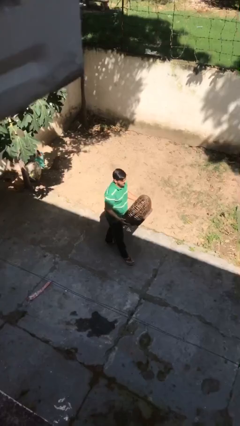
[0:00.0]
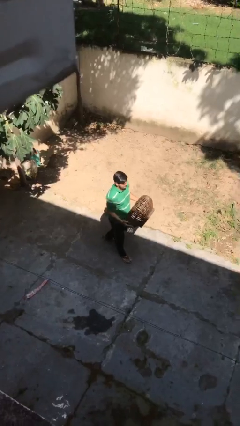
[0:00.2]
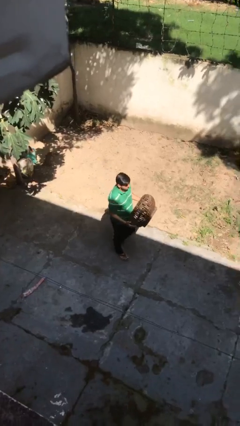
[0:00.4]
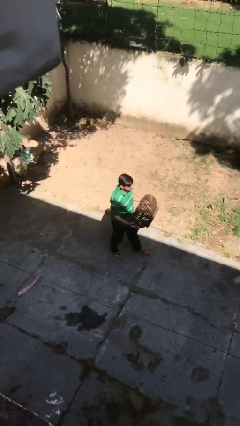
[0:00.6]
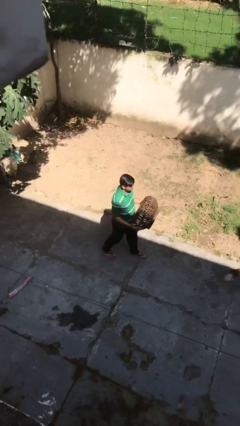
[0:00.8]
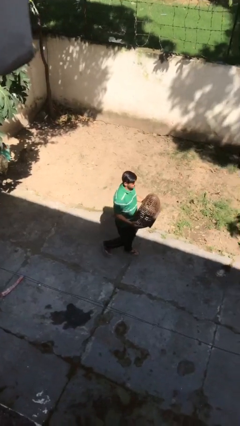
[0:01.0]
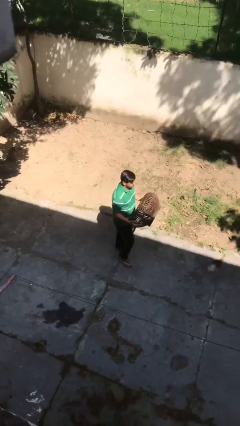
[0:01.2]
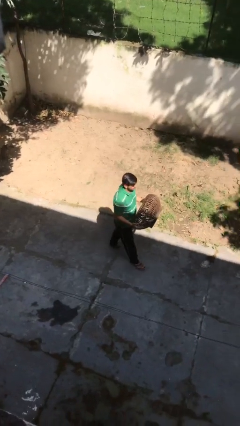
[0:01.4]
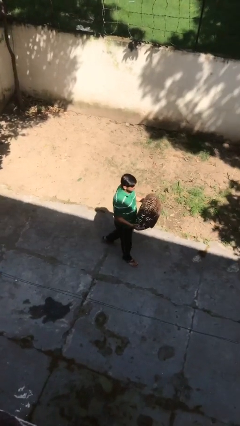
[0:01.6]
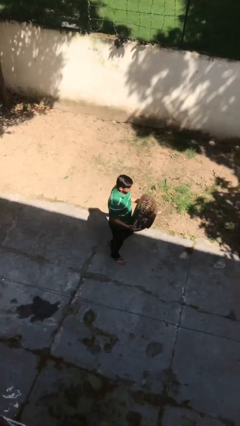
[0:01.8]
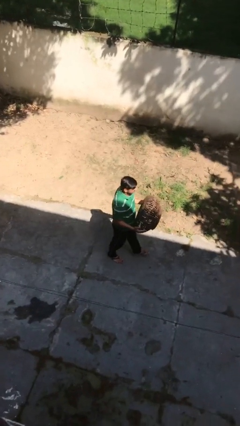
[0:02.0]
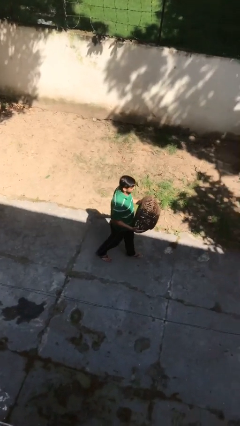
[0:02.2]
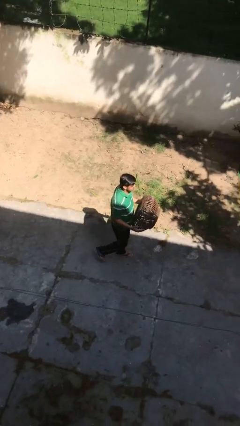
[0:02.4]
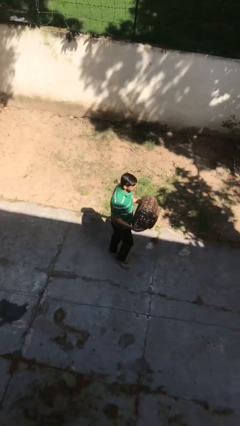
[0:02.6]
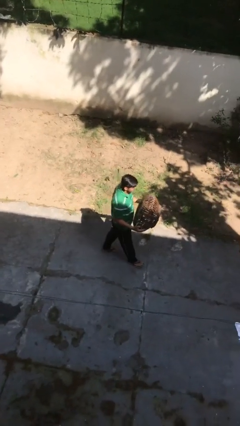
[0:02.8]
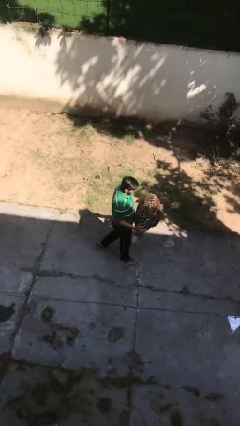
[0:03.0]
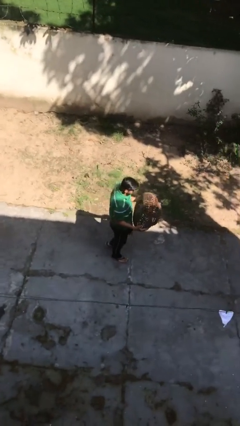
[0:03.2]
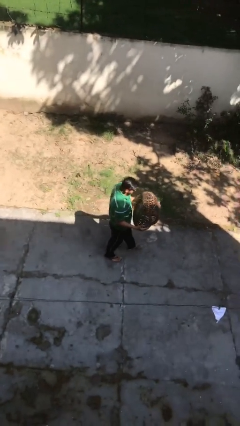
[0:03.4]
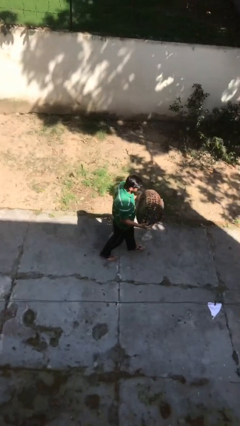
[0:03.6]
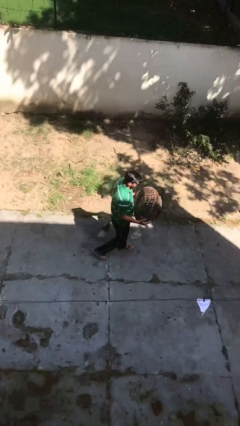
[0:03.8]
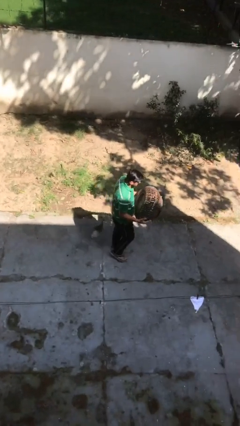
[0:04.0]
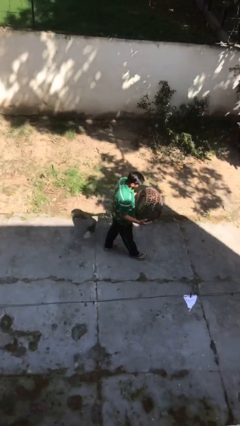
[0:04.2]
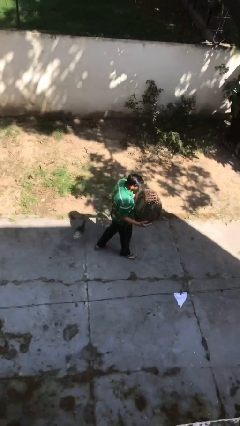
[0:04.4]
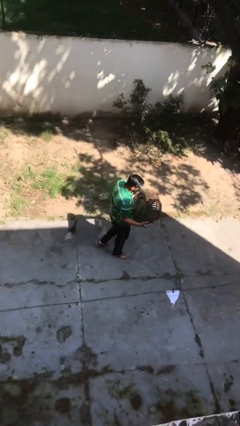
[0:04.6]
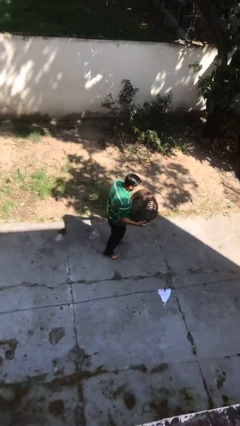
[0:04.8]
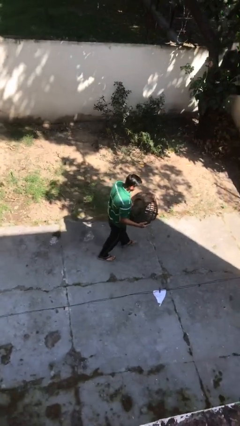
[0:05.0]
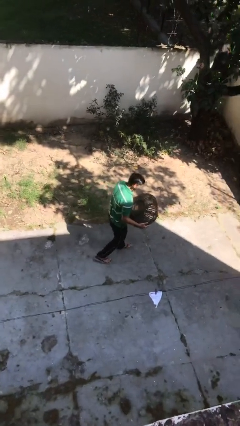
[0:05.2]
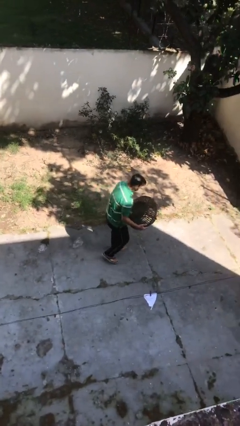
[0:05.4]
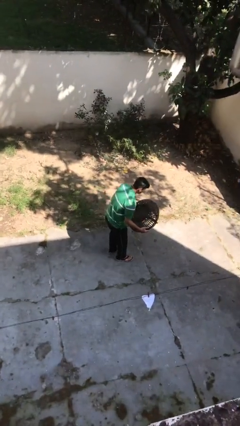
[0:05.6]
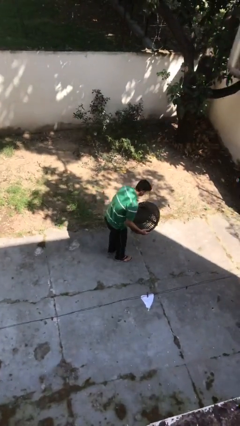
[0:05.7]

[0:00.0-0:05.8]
person carries heavy object

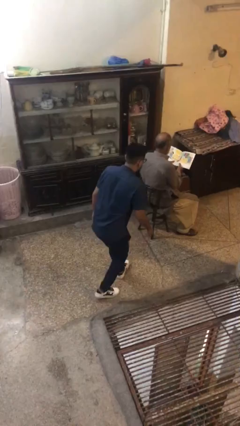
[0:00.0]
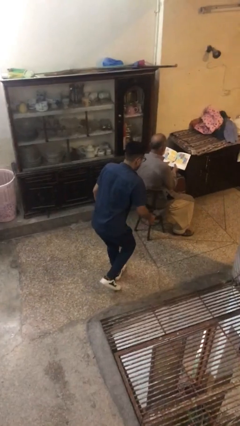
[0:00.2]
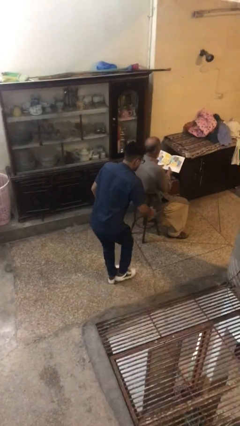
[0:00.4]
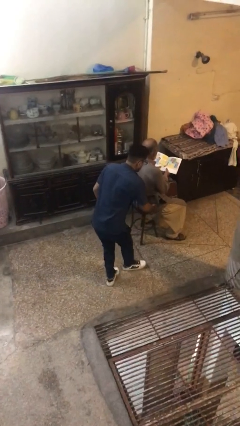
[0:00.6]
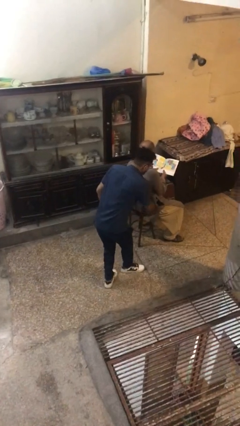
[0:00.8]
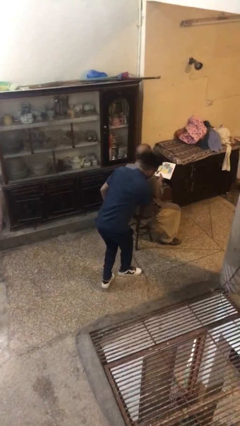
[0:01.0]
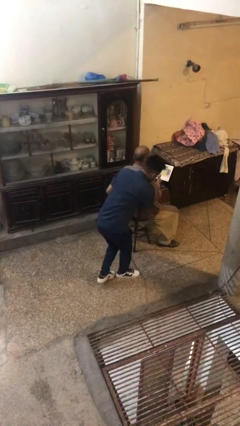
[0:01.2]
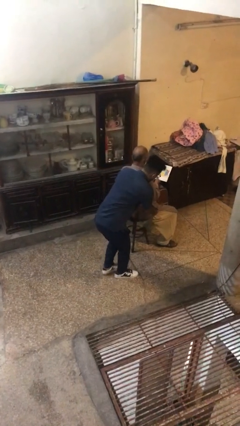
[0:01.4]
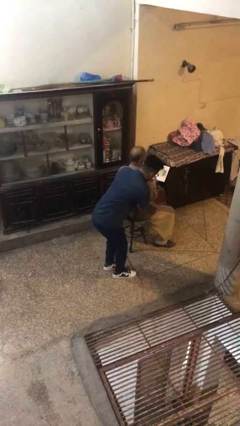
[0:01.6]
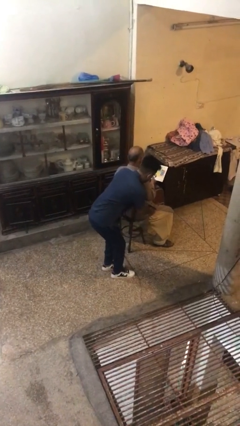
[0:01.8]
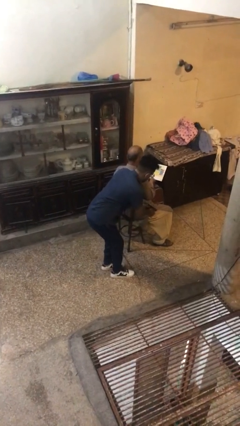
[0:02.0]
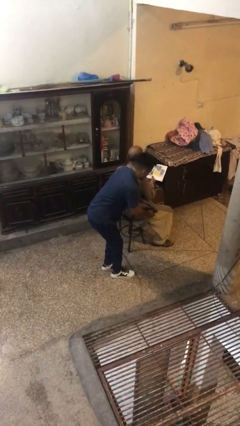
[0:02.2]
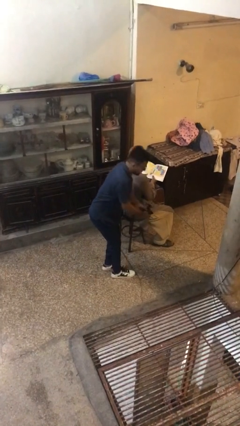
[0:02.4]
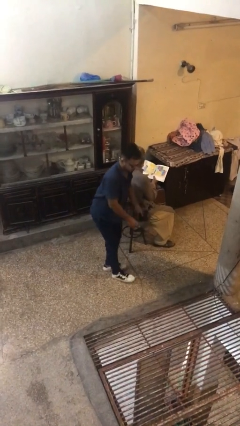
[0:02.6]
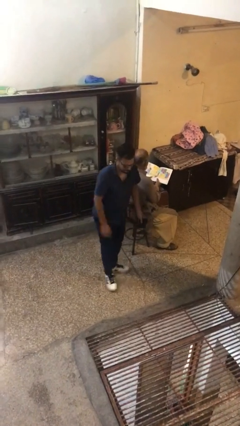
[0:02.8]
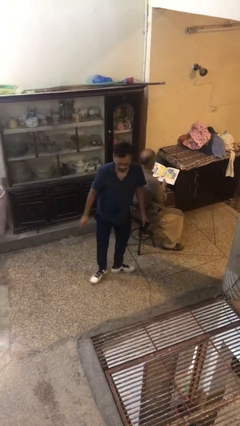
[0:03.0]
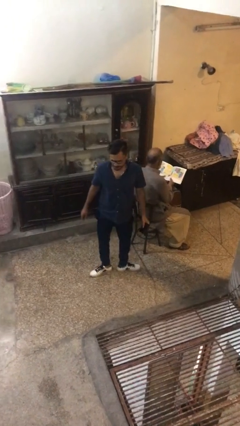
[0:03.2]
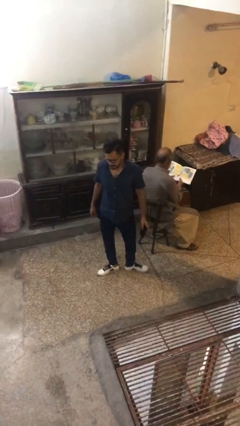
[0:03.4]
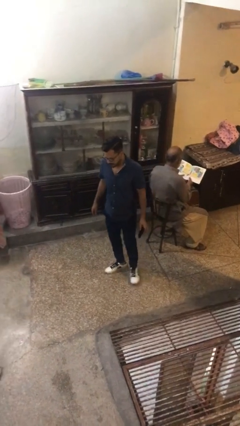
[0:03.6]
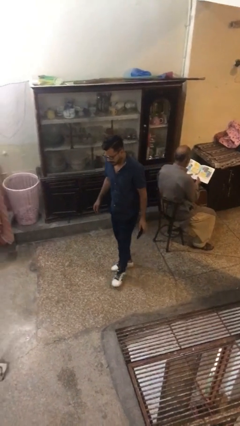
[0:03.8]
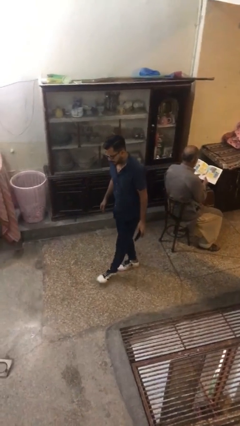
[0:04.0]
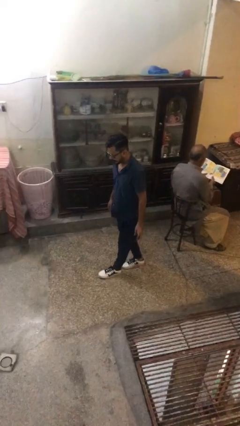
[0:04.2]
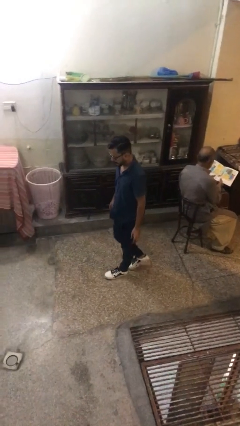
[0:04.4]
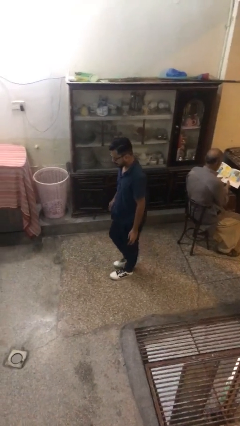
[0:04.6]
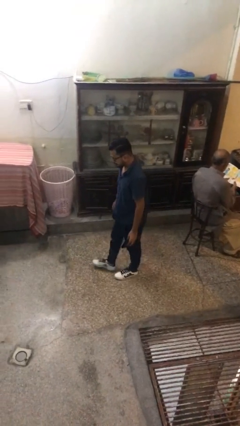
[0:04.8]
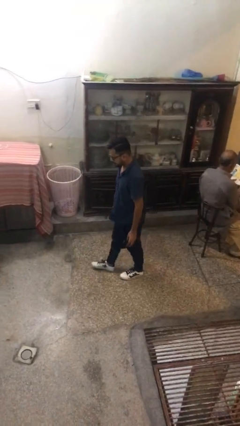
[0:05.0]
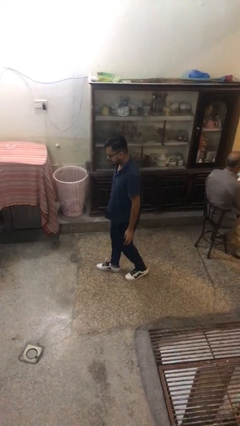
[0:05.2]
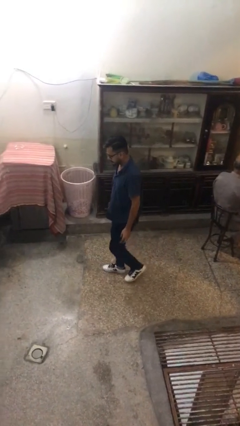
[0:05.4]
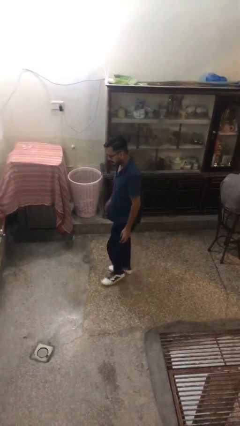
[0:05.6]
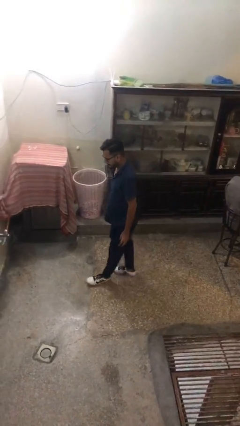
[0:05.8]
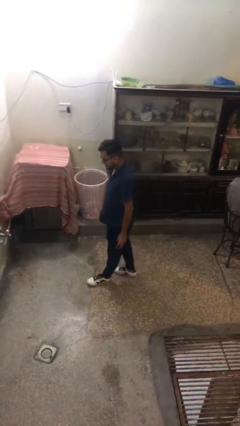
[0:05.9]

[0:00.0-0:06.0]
person steals object from person

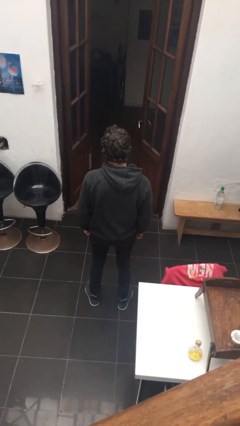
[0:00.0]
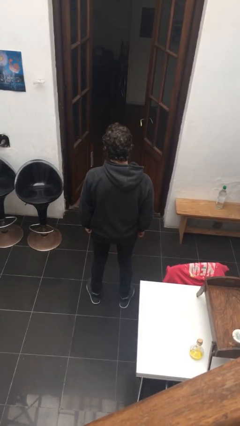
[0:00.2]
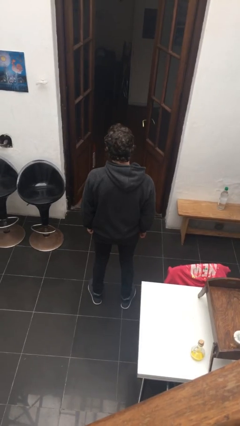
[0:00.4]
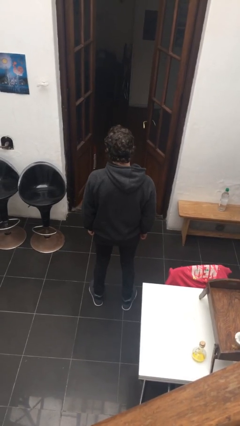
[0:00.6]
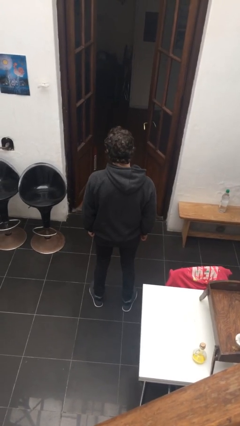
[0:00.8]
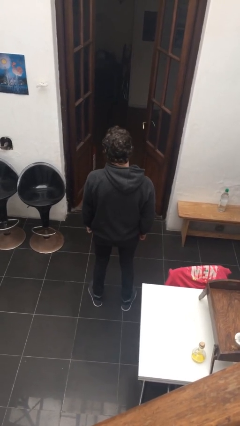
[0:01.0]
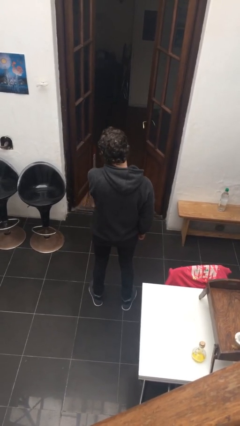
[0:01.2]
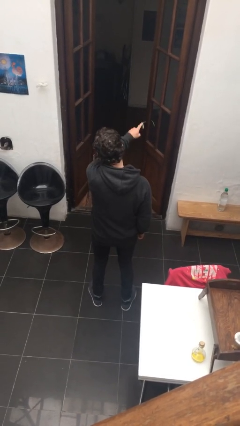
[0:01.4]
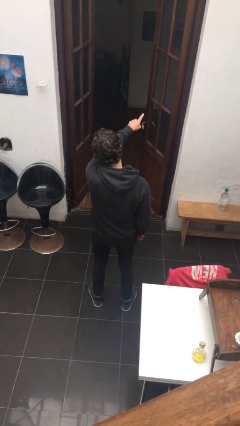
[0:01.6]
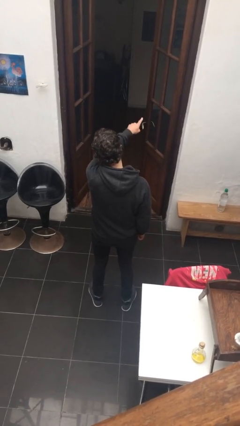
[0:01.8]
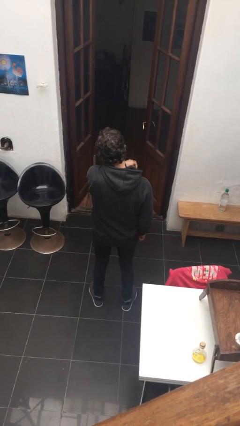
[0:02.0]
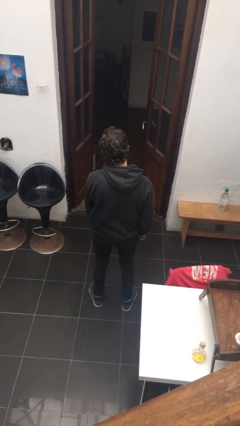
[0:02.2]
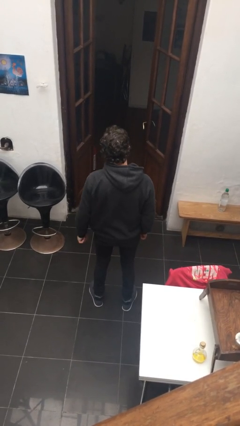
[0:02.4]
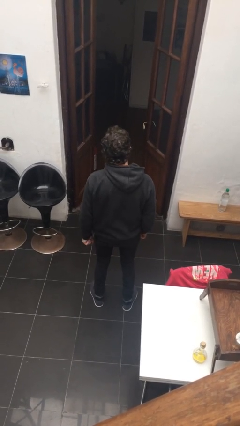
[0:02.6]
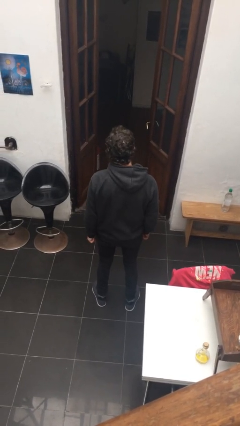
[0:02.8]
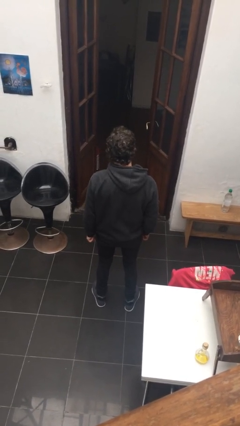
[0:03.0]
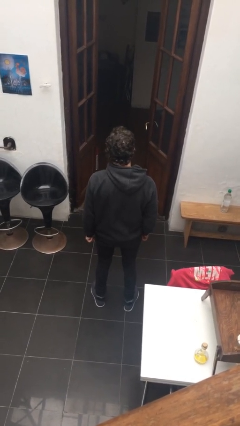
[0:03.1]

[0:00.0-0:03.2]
person points at person

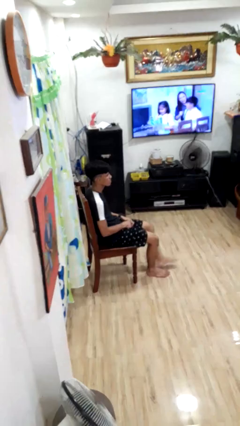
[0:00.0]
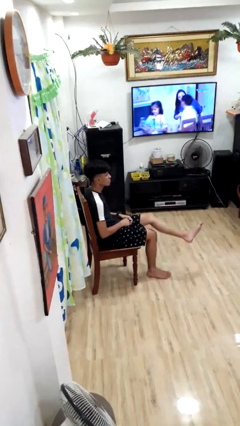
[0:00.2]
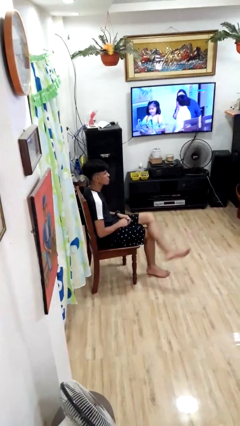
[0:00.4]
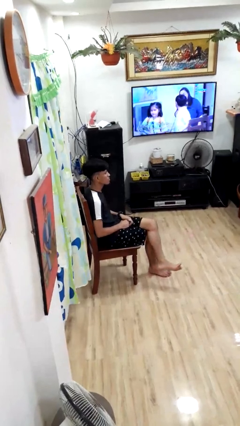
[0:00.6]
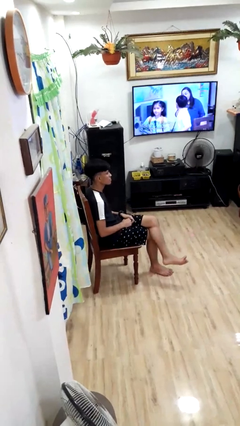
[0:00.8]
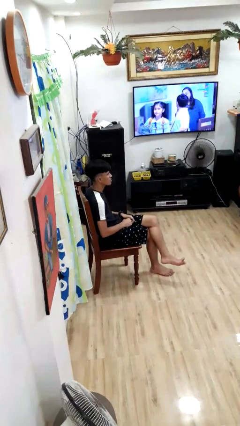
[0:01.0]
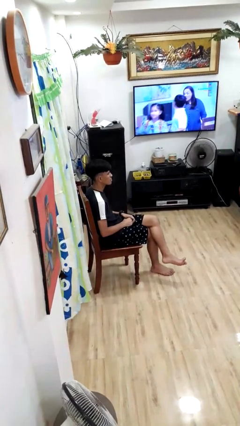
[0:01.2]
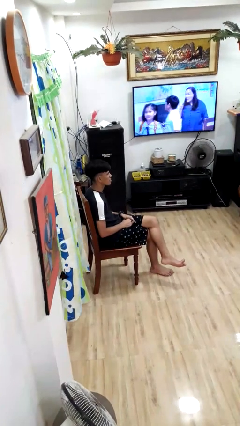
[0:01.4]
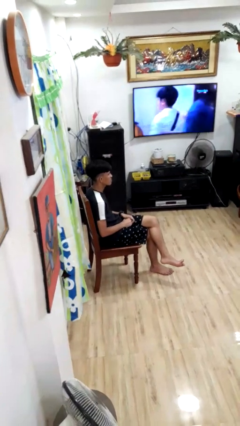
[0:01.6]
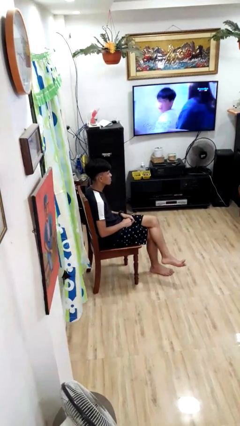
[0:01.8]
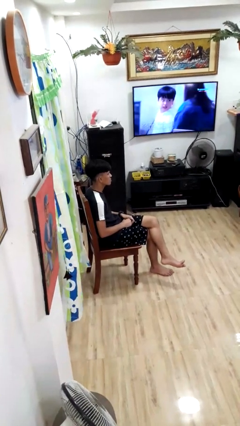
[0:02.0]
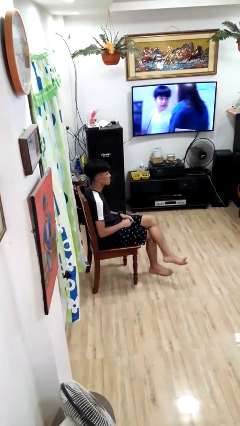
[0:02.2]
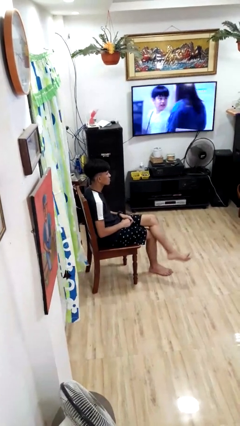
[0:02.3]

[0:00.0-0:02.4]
person crosses legs

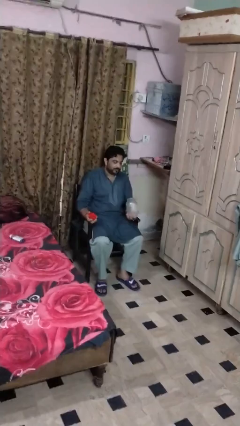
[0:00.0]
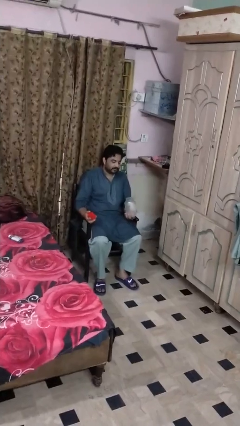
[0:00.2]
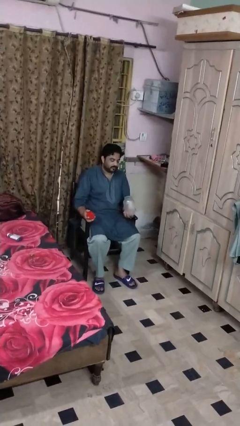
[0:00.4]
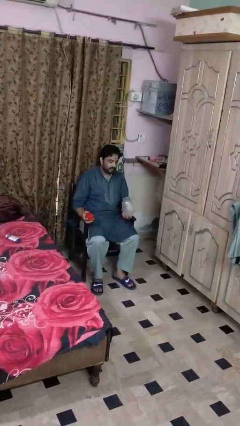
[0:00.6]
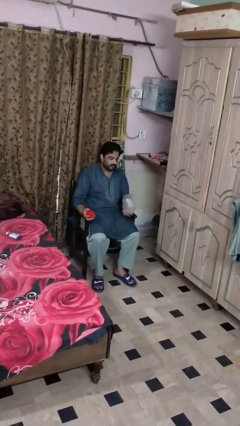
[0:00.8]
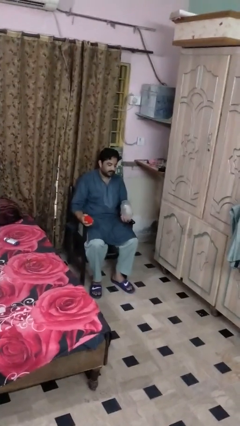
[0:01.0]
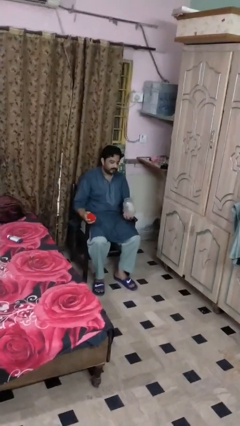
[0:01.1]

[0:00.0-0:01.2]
person opens jar
